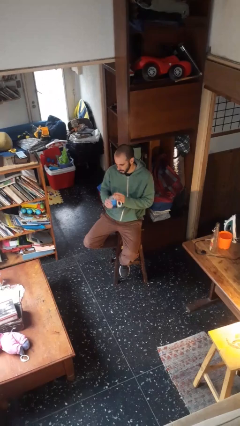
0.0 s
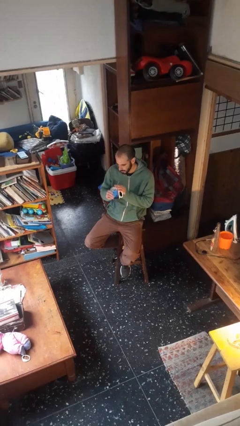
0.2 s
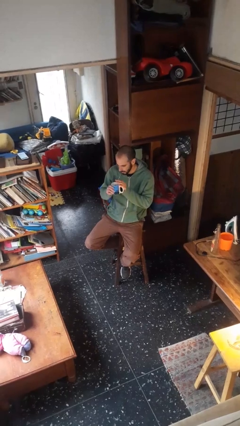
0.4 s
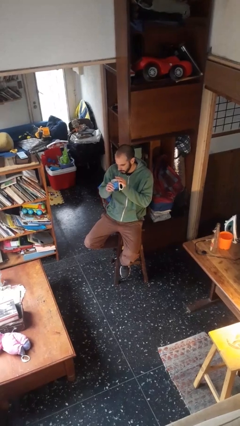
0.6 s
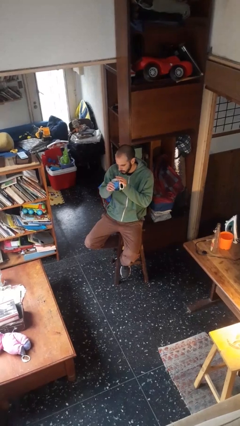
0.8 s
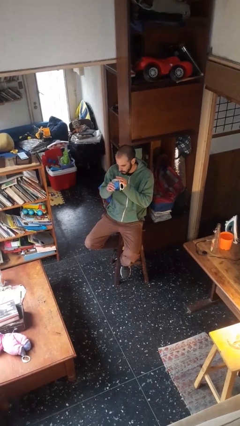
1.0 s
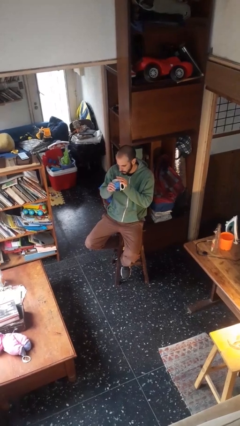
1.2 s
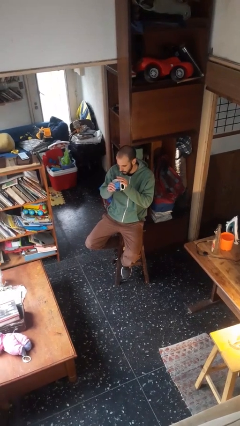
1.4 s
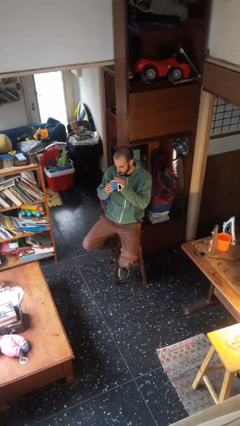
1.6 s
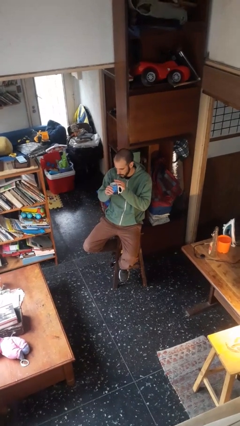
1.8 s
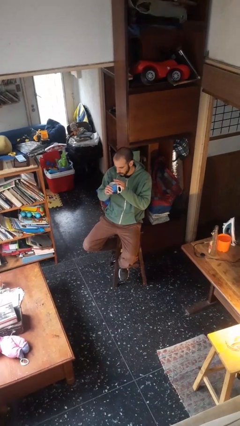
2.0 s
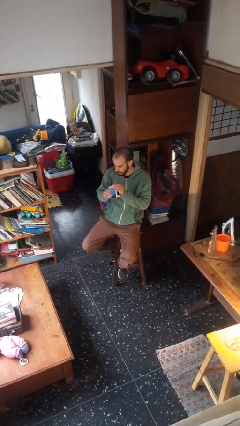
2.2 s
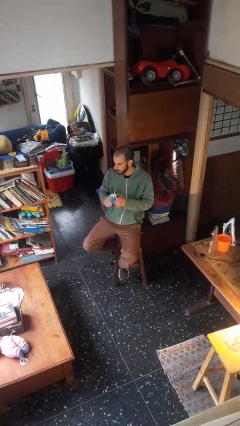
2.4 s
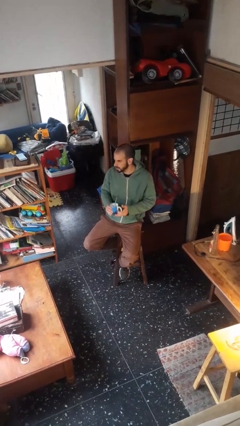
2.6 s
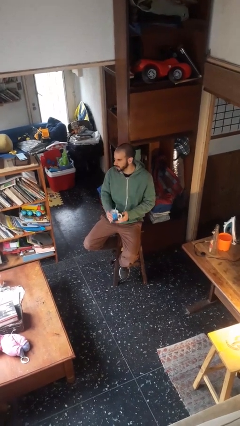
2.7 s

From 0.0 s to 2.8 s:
person drinks from straw

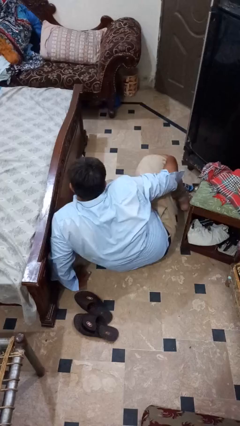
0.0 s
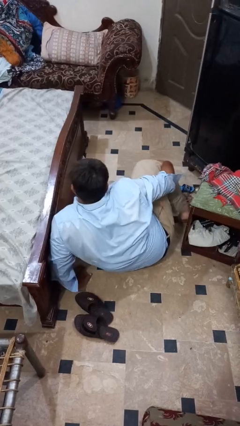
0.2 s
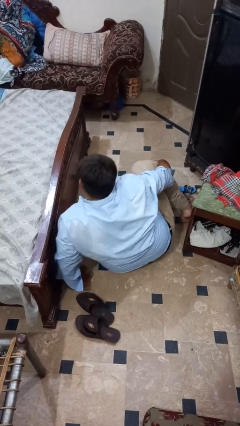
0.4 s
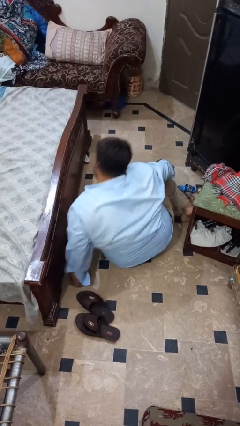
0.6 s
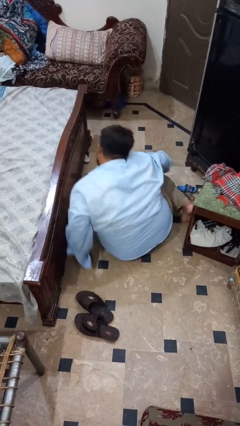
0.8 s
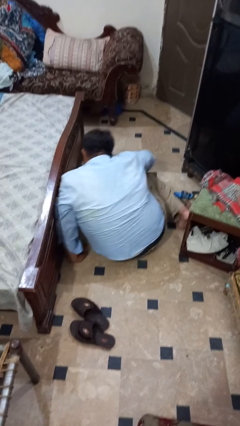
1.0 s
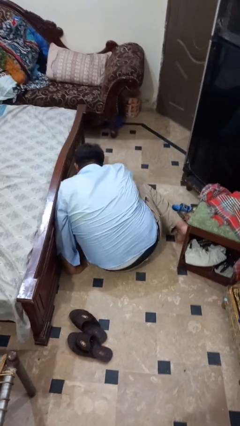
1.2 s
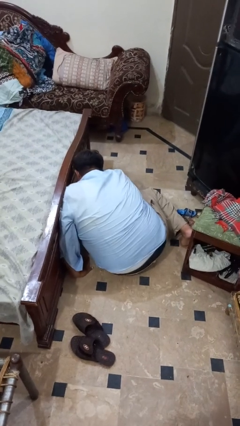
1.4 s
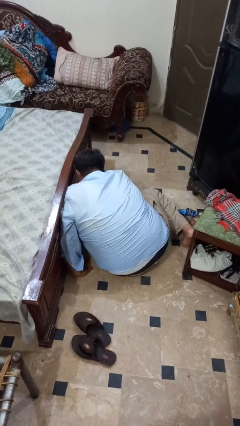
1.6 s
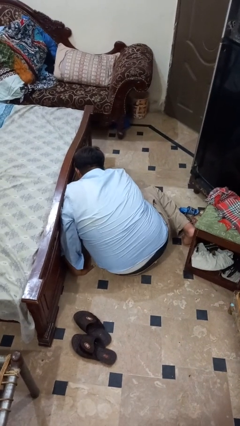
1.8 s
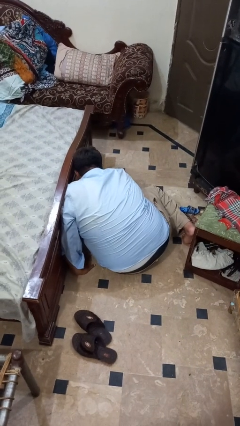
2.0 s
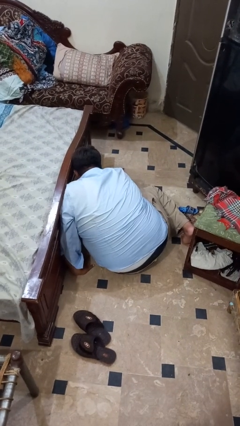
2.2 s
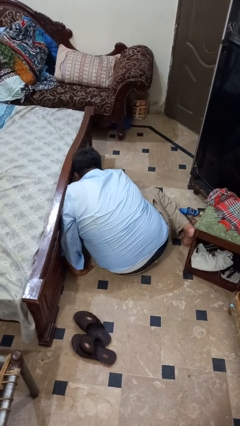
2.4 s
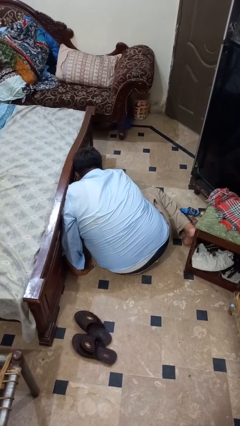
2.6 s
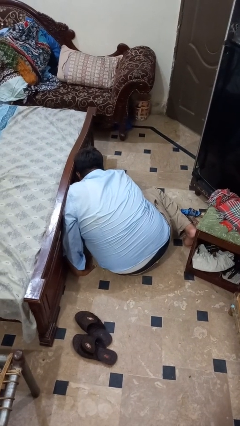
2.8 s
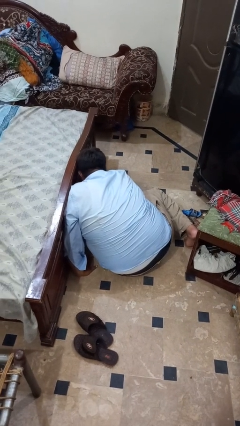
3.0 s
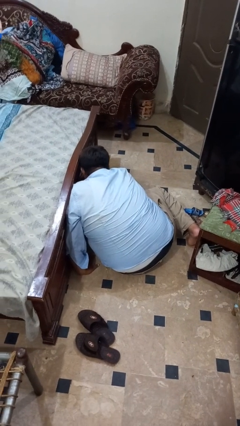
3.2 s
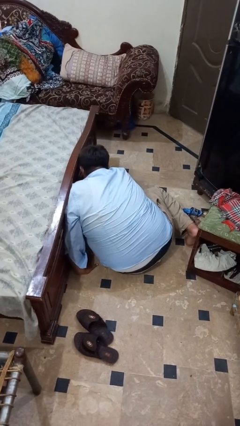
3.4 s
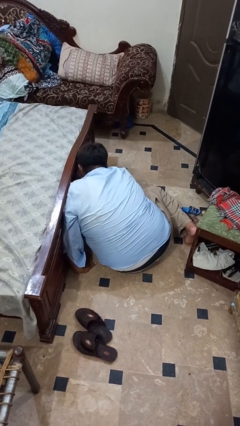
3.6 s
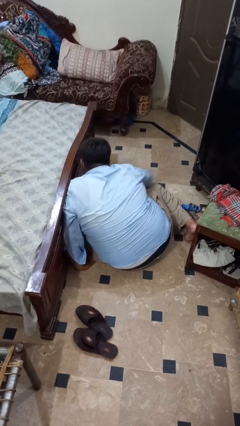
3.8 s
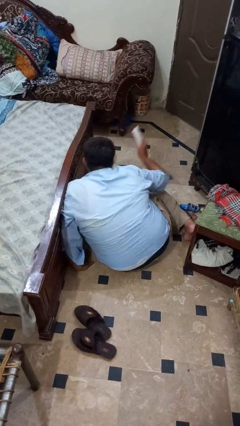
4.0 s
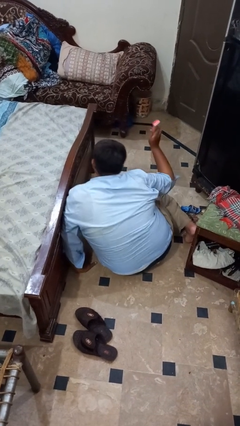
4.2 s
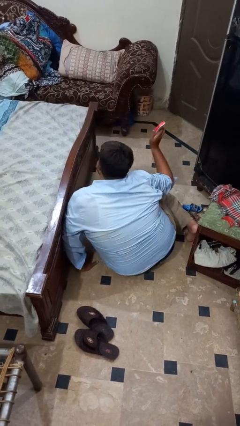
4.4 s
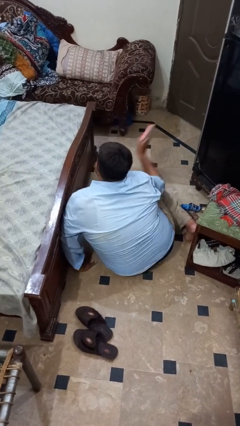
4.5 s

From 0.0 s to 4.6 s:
person searches under bed

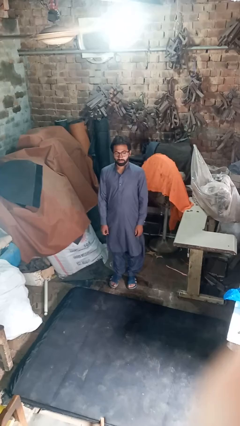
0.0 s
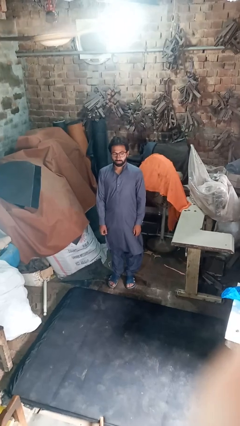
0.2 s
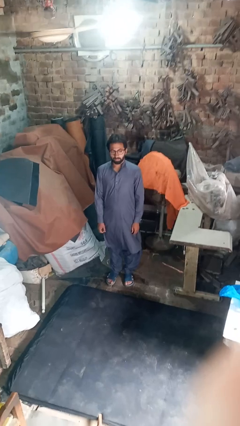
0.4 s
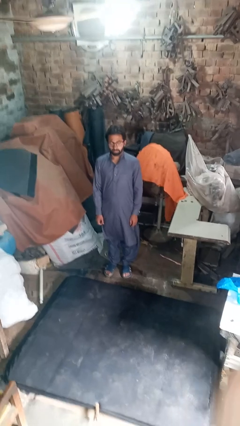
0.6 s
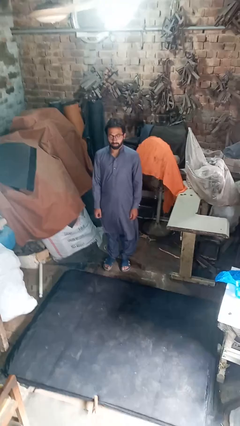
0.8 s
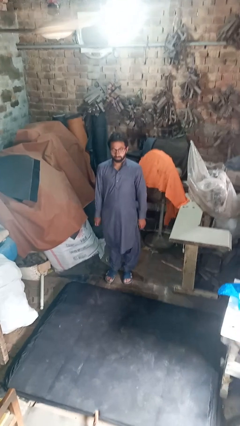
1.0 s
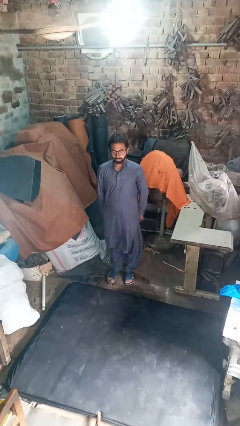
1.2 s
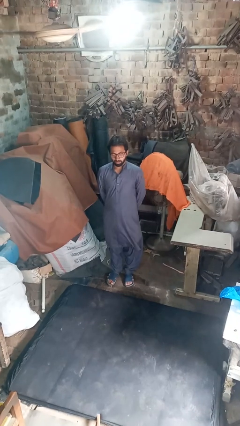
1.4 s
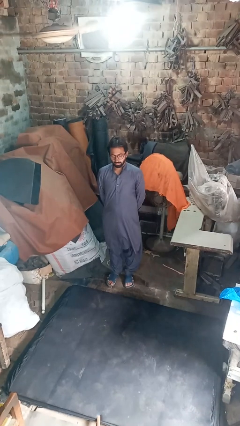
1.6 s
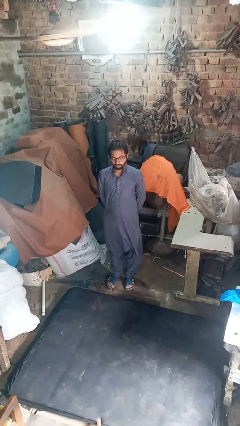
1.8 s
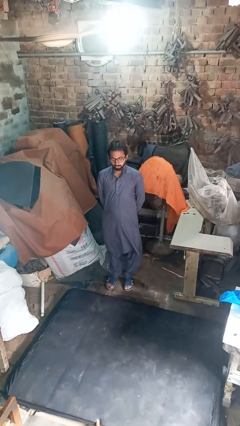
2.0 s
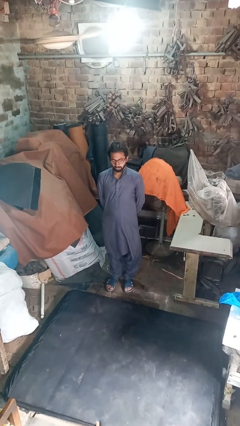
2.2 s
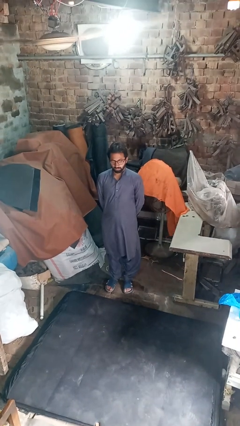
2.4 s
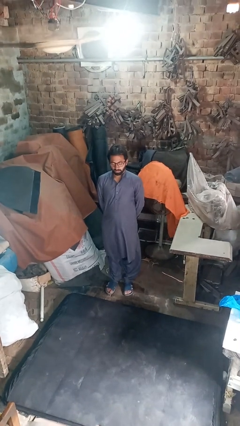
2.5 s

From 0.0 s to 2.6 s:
person stretches back

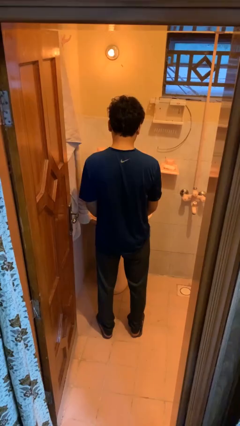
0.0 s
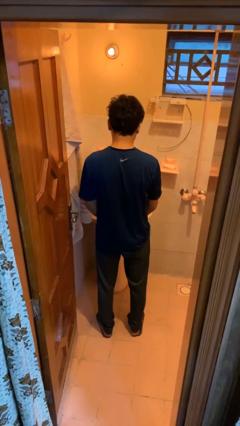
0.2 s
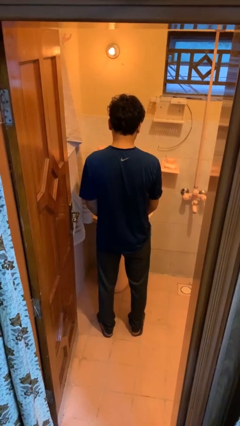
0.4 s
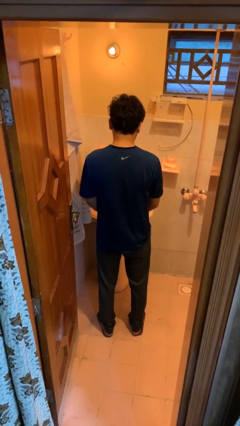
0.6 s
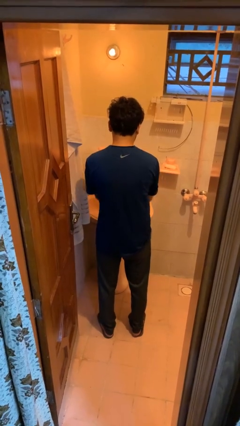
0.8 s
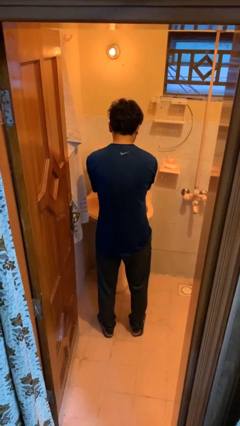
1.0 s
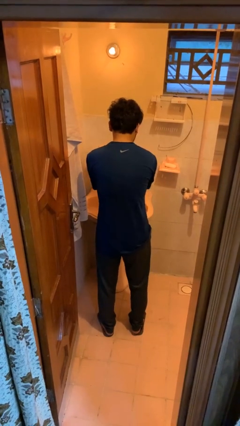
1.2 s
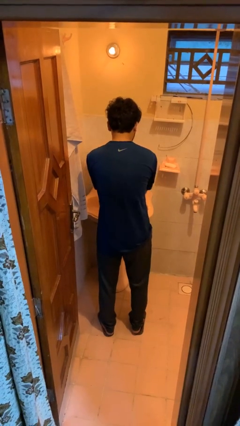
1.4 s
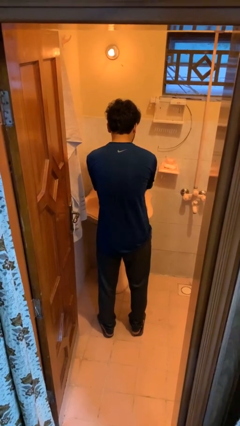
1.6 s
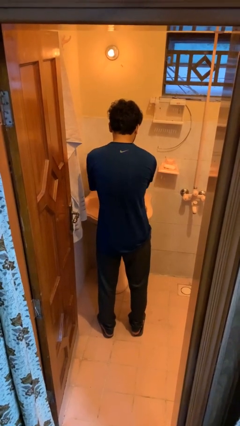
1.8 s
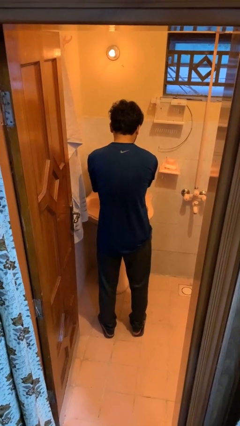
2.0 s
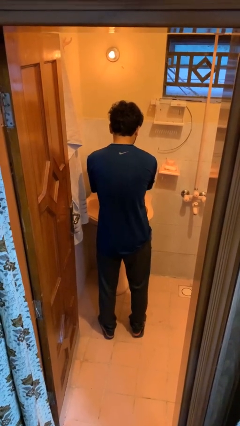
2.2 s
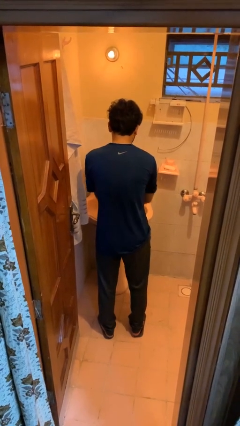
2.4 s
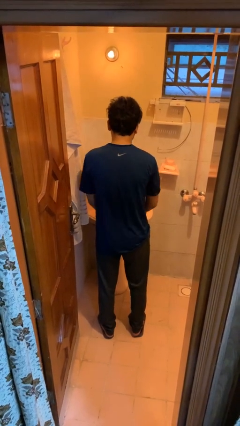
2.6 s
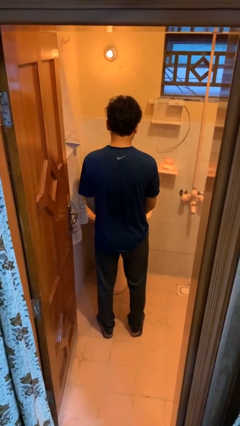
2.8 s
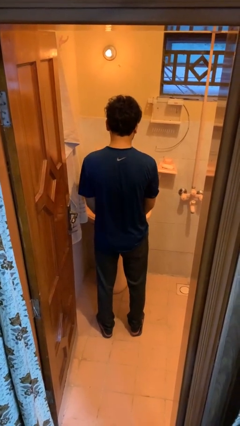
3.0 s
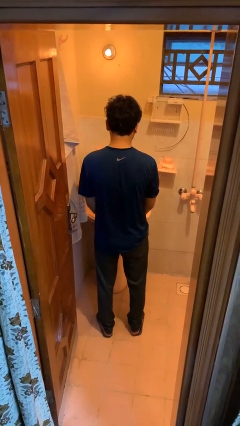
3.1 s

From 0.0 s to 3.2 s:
person washes hands

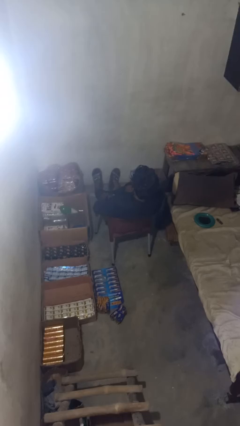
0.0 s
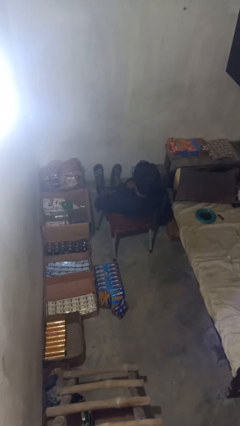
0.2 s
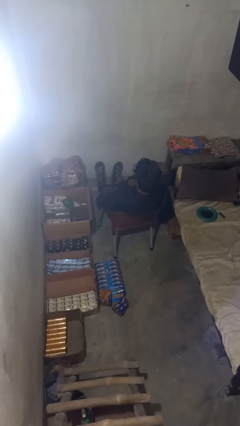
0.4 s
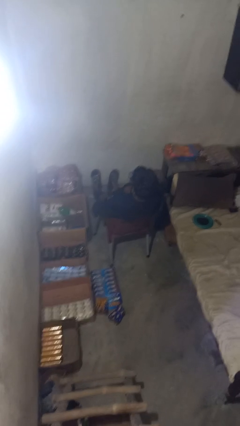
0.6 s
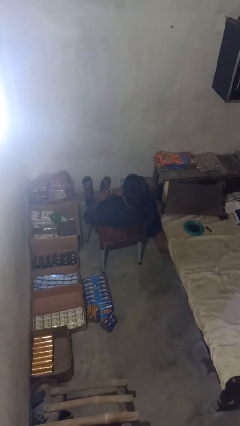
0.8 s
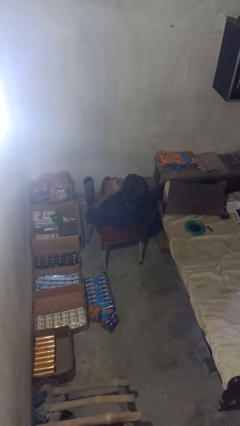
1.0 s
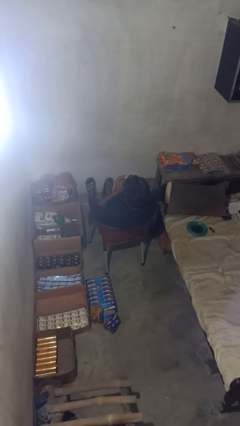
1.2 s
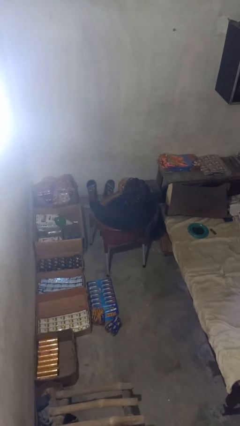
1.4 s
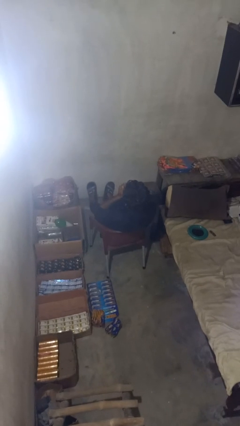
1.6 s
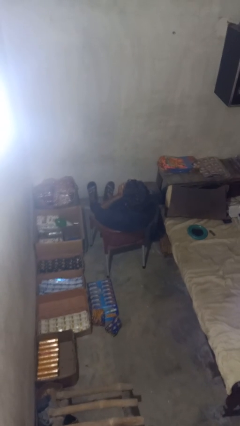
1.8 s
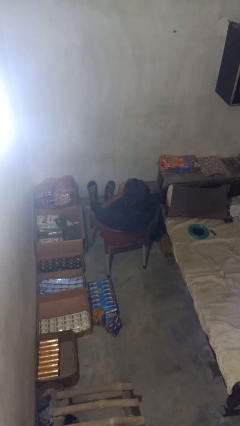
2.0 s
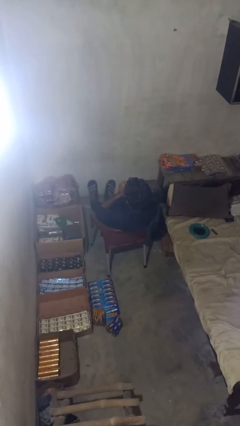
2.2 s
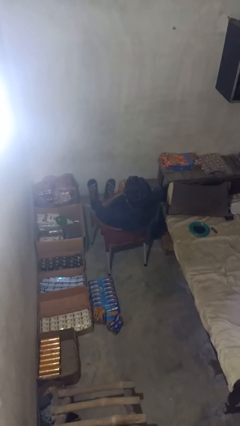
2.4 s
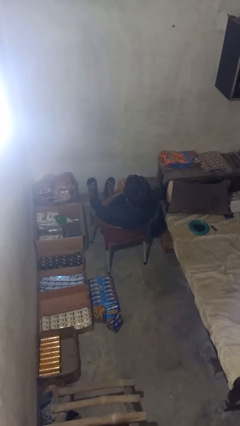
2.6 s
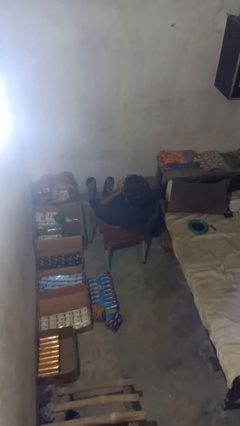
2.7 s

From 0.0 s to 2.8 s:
person blows into hands

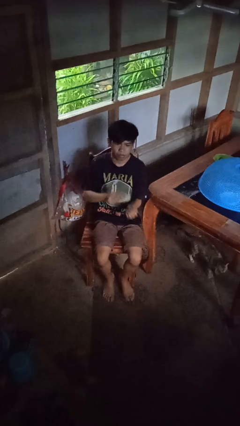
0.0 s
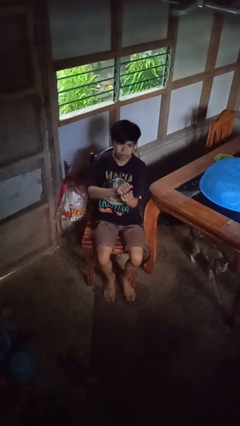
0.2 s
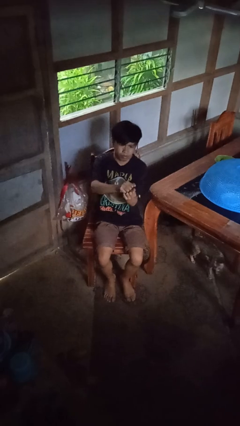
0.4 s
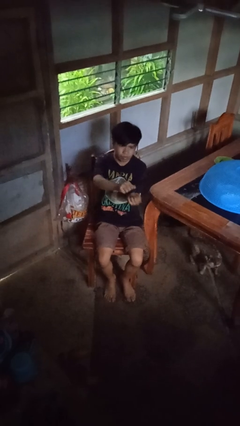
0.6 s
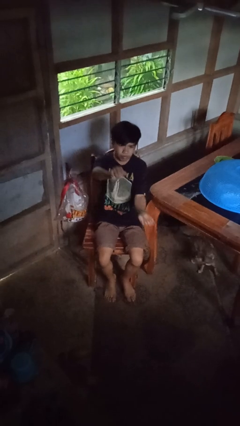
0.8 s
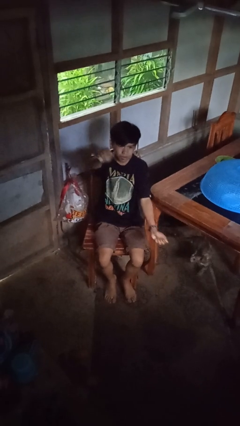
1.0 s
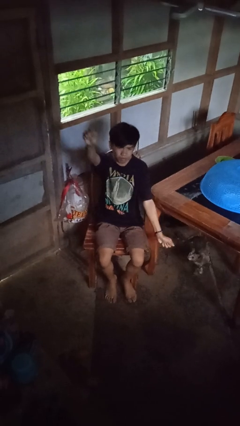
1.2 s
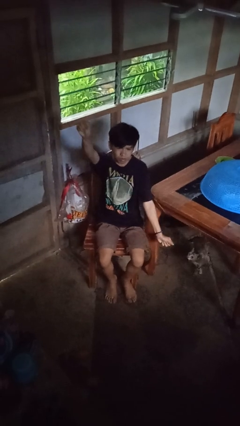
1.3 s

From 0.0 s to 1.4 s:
person gestures zoom out

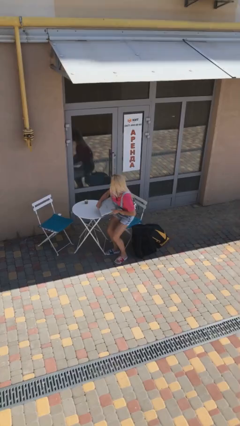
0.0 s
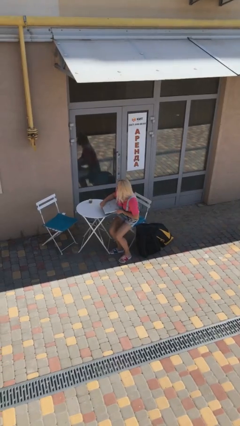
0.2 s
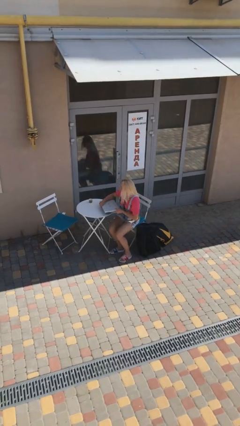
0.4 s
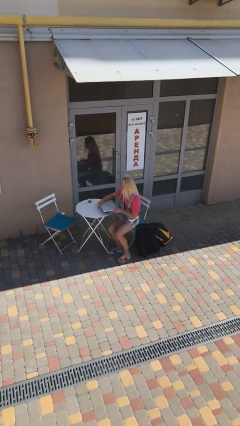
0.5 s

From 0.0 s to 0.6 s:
person sits down
